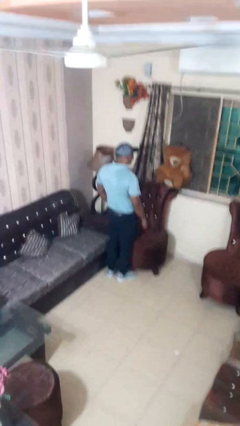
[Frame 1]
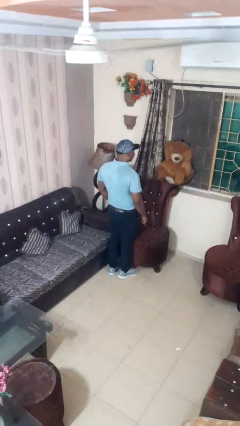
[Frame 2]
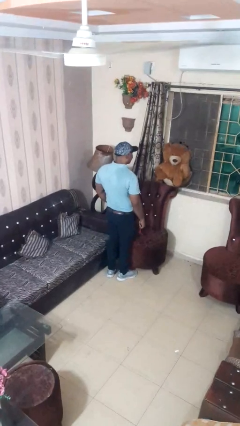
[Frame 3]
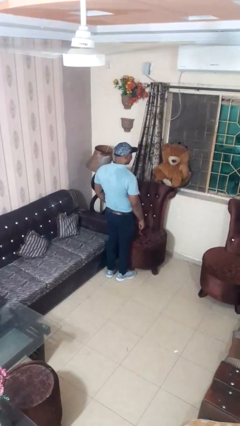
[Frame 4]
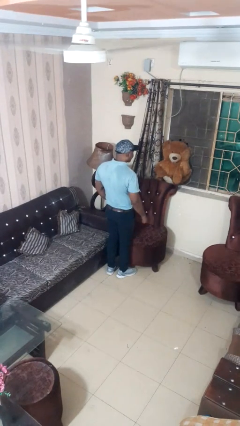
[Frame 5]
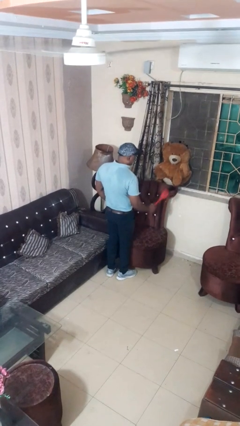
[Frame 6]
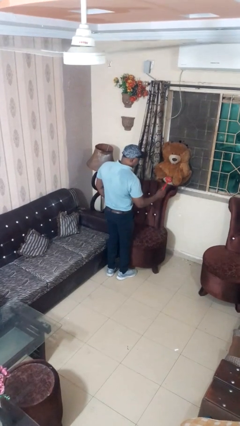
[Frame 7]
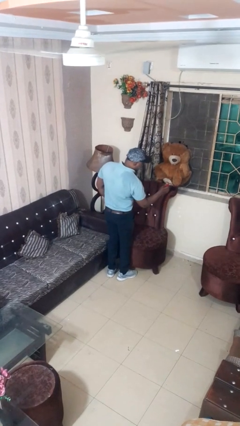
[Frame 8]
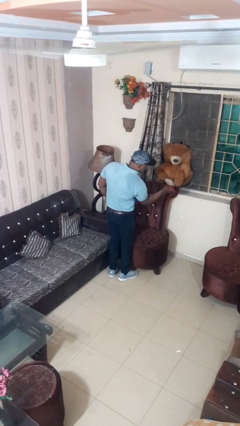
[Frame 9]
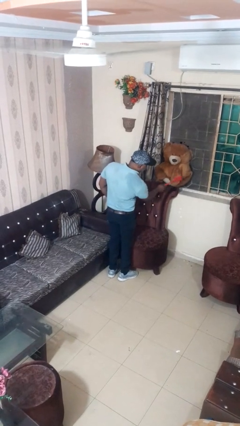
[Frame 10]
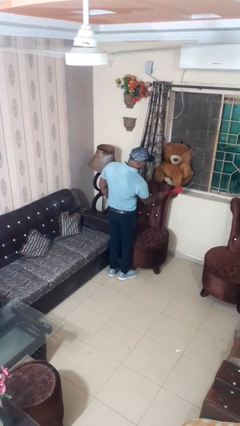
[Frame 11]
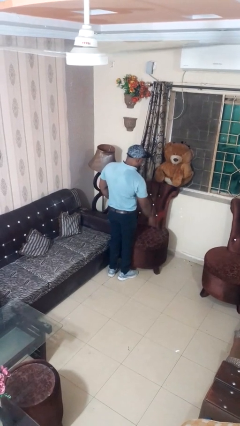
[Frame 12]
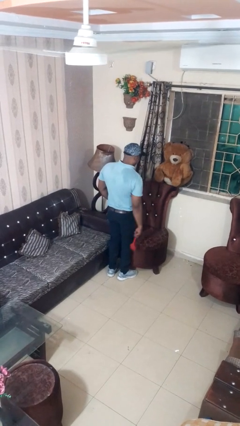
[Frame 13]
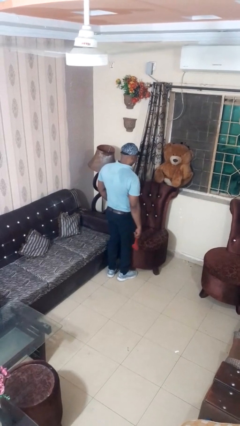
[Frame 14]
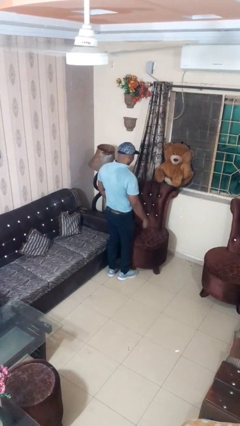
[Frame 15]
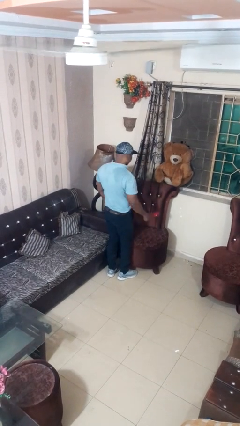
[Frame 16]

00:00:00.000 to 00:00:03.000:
person swats bug

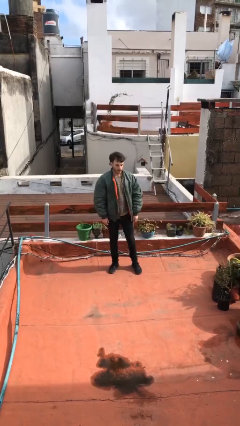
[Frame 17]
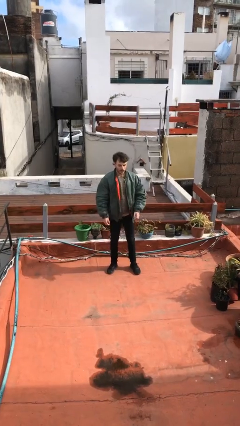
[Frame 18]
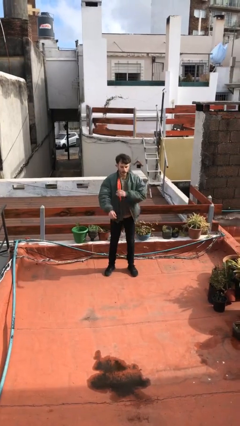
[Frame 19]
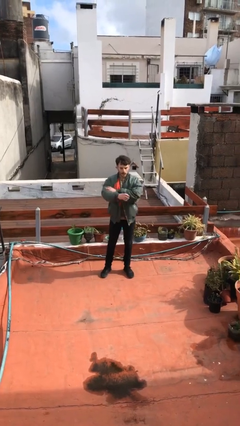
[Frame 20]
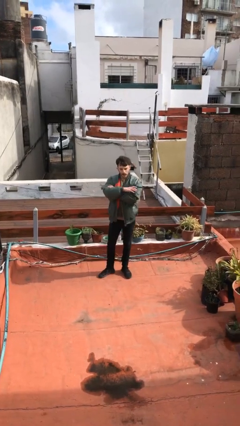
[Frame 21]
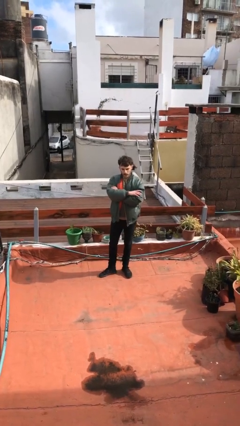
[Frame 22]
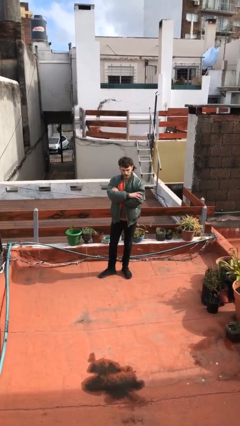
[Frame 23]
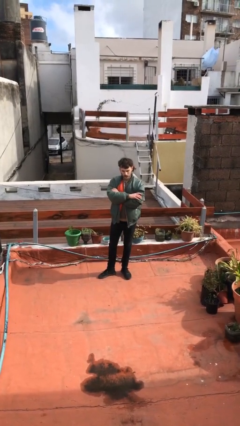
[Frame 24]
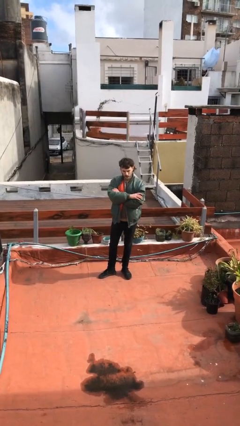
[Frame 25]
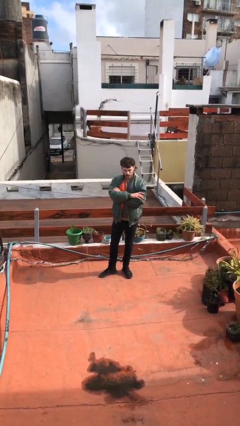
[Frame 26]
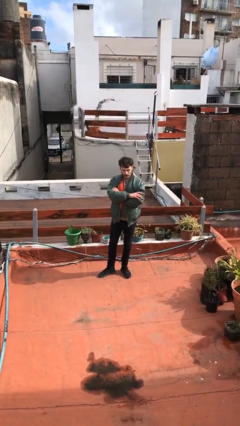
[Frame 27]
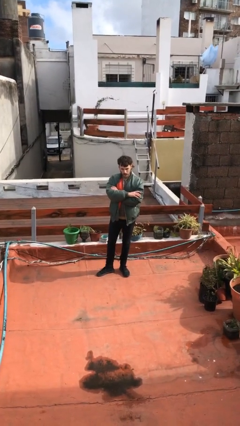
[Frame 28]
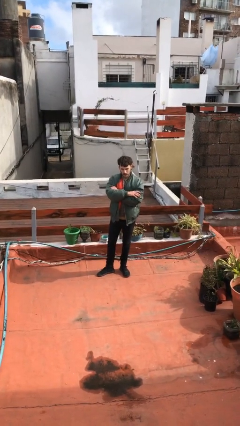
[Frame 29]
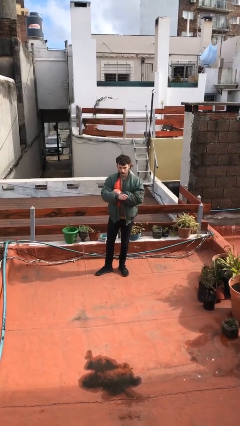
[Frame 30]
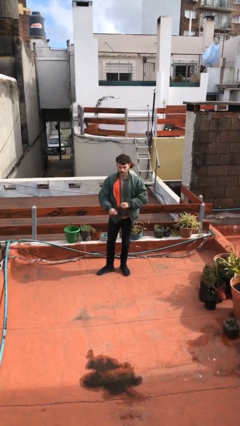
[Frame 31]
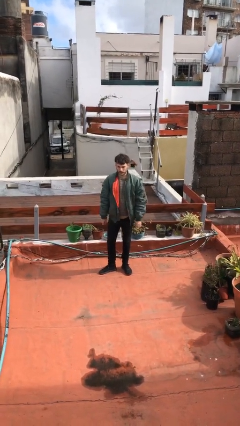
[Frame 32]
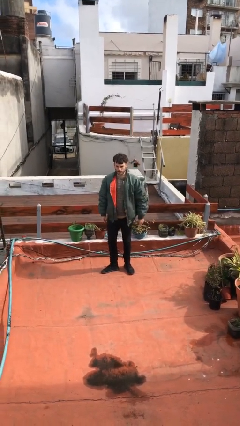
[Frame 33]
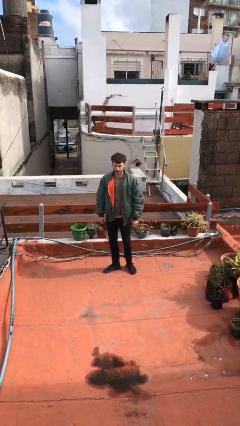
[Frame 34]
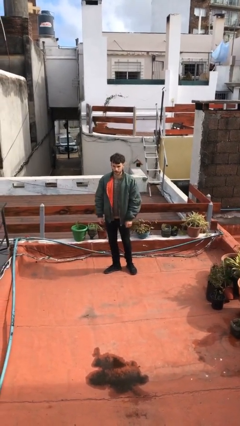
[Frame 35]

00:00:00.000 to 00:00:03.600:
person crosses arms

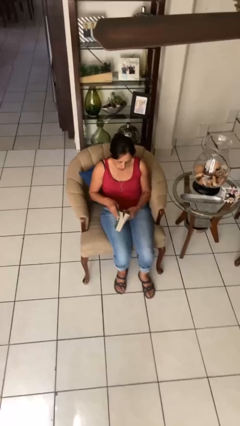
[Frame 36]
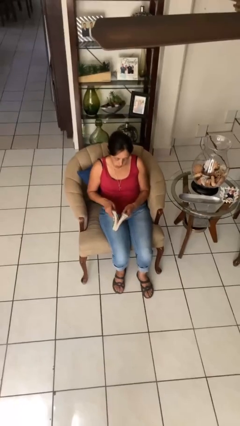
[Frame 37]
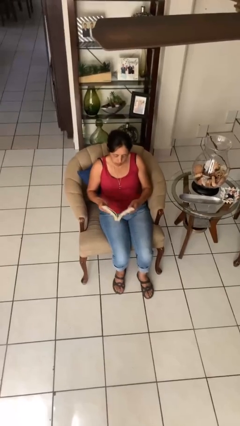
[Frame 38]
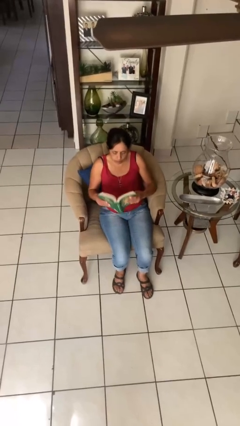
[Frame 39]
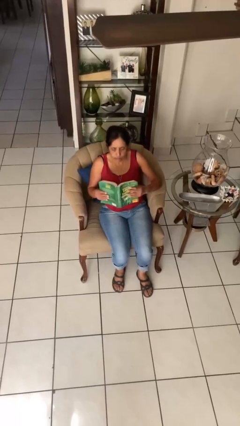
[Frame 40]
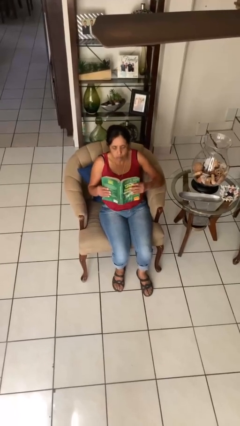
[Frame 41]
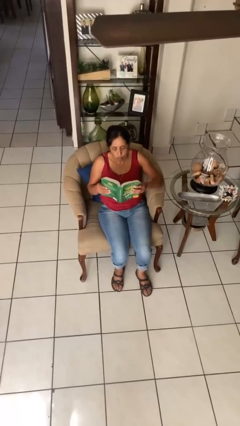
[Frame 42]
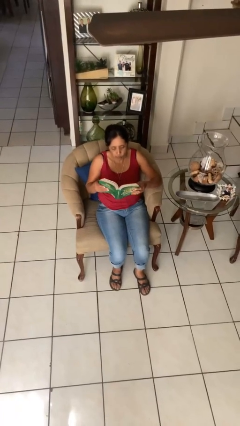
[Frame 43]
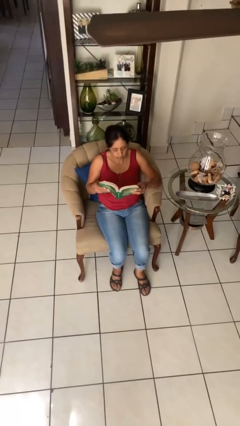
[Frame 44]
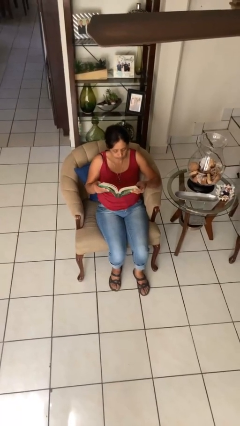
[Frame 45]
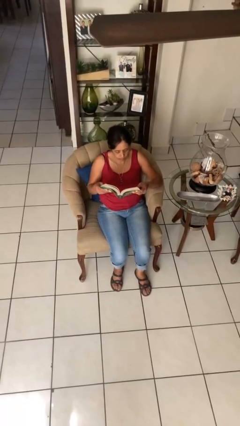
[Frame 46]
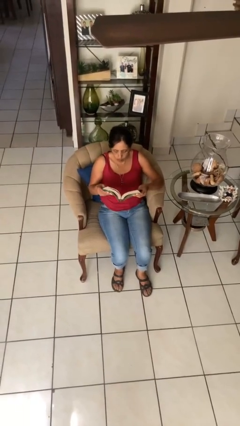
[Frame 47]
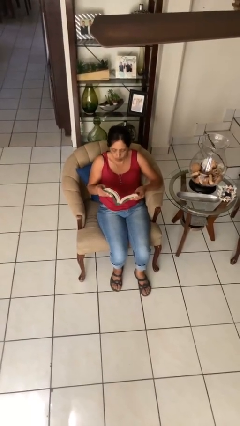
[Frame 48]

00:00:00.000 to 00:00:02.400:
person reads book

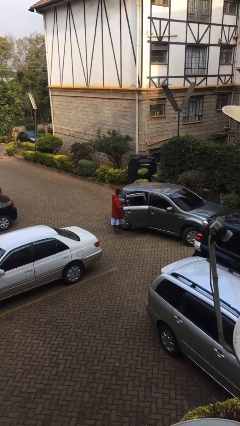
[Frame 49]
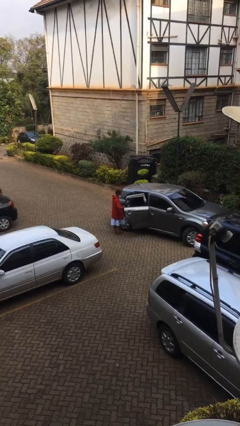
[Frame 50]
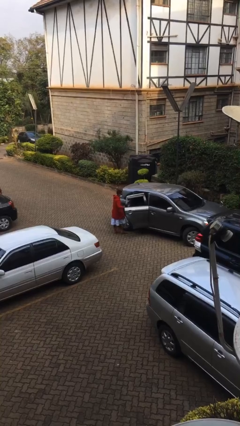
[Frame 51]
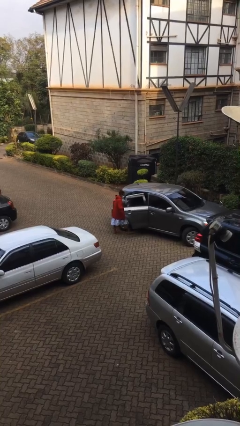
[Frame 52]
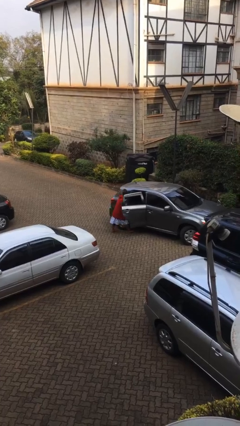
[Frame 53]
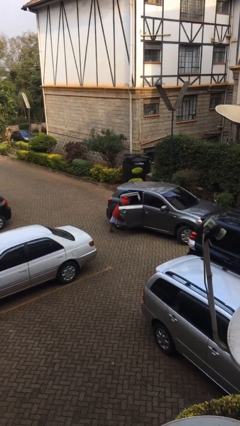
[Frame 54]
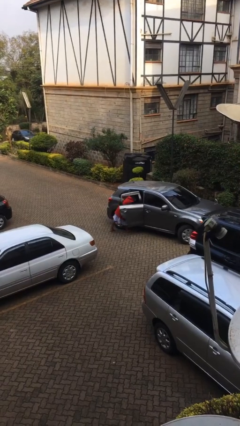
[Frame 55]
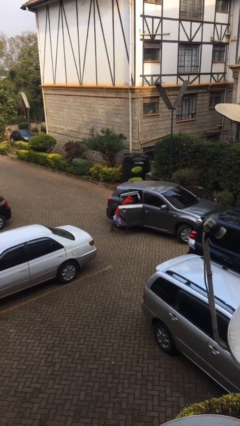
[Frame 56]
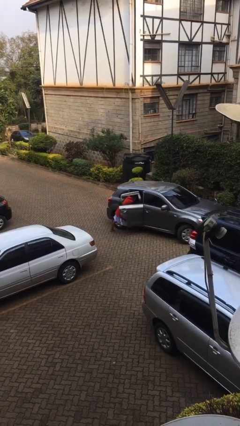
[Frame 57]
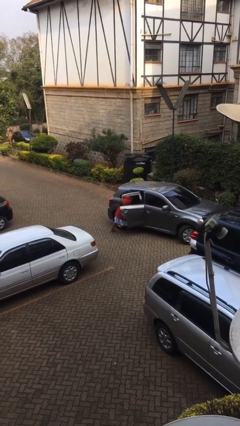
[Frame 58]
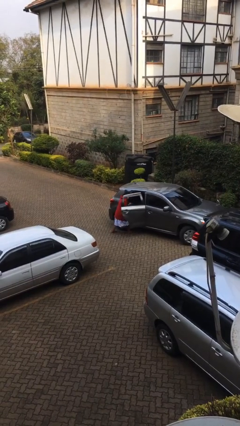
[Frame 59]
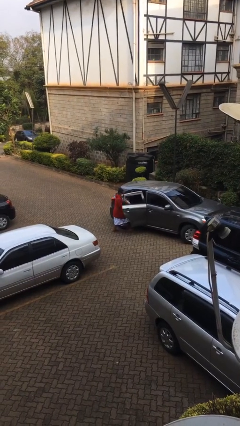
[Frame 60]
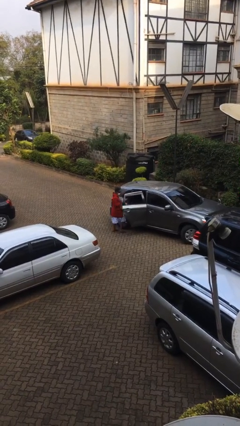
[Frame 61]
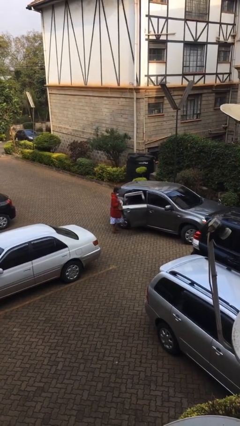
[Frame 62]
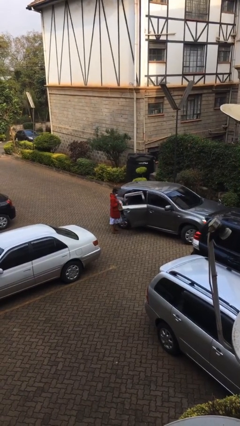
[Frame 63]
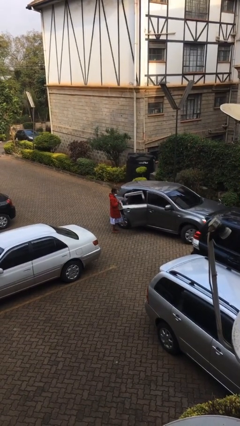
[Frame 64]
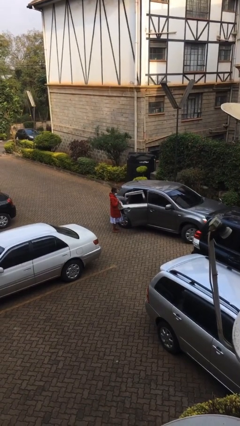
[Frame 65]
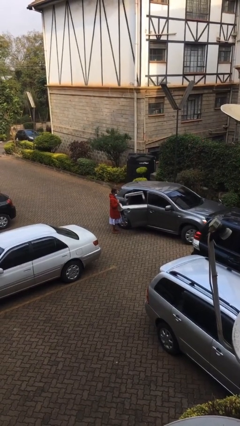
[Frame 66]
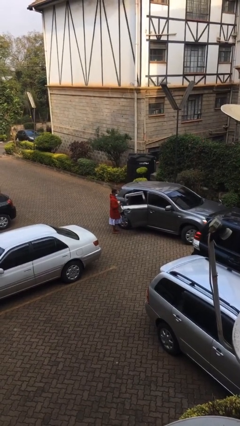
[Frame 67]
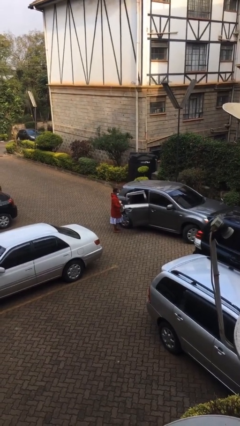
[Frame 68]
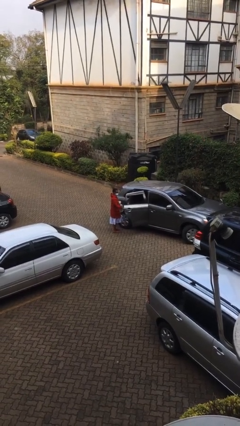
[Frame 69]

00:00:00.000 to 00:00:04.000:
person unloads car

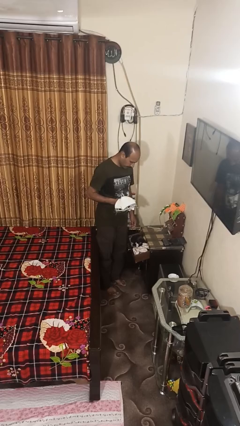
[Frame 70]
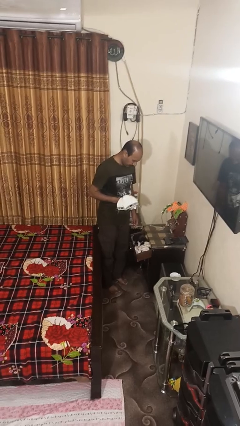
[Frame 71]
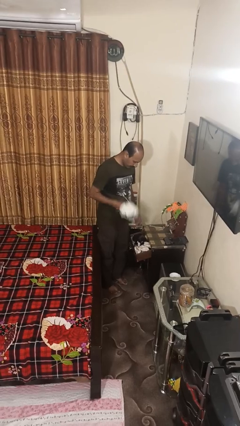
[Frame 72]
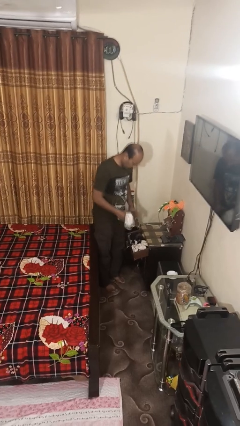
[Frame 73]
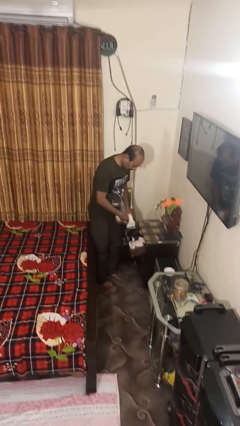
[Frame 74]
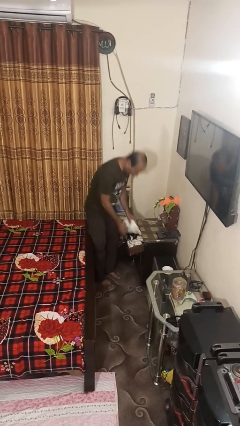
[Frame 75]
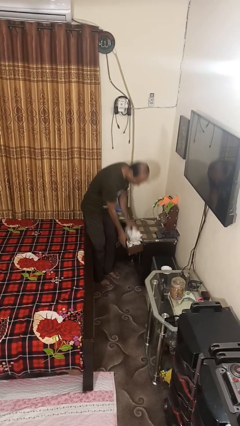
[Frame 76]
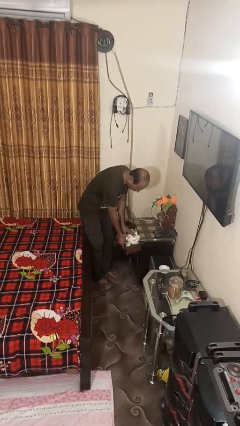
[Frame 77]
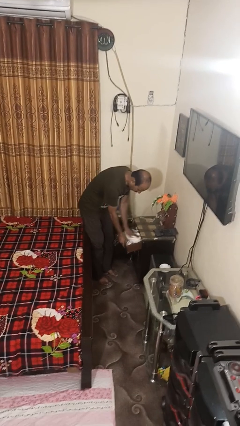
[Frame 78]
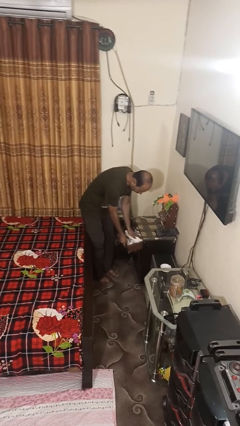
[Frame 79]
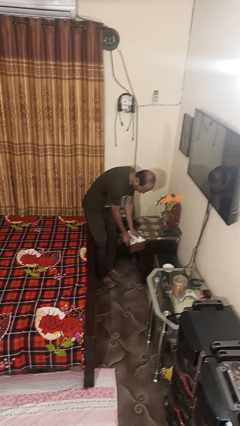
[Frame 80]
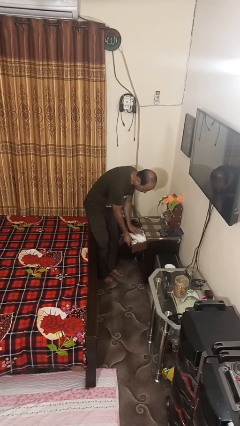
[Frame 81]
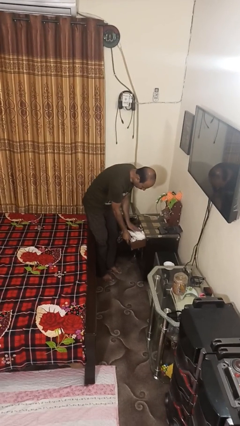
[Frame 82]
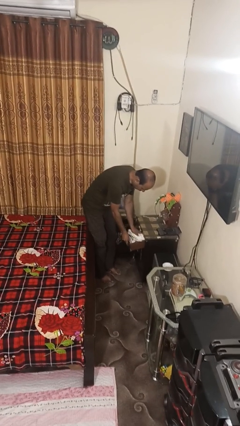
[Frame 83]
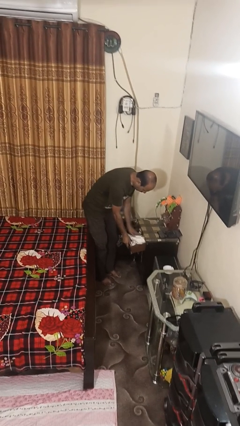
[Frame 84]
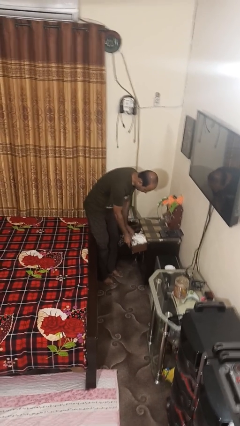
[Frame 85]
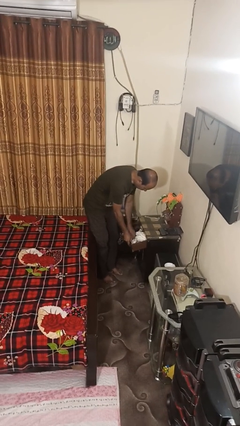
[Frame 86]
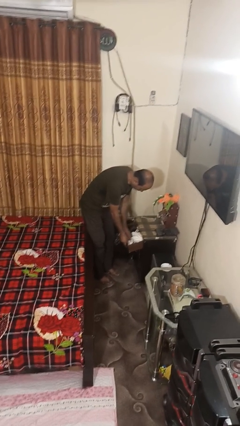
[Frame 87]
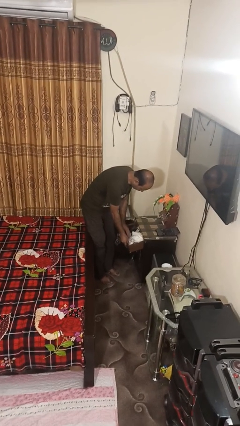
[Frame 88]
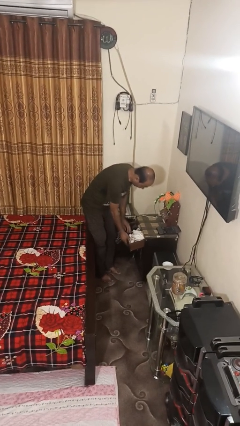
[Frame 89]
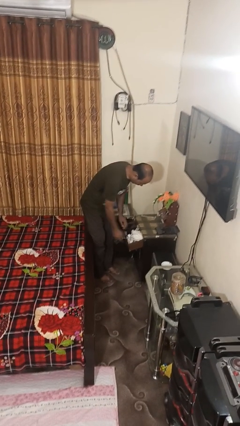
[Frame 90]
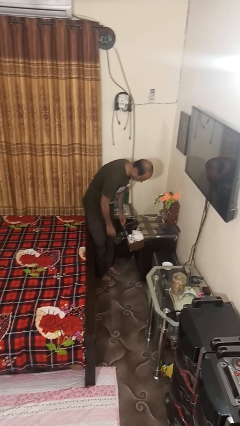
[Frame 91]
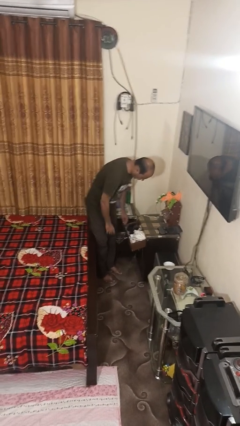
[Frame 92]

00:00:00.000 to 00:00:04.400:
person puts clothes into dresser

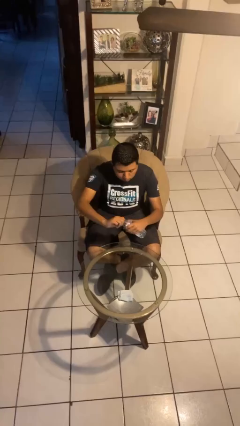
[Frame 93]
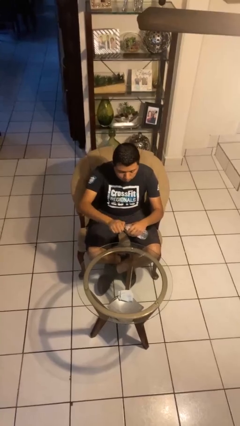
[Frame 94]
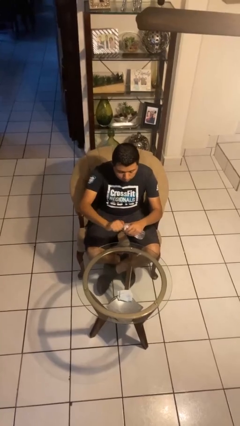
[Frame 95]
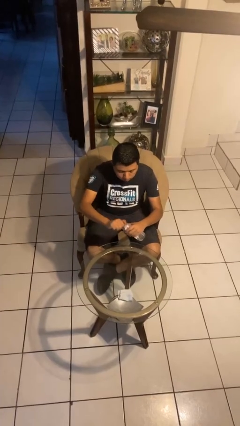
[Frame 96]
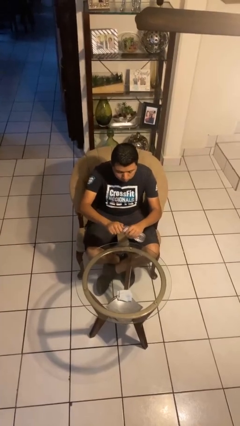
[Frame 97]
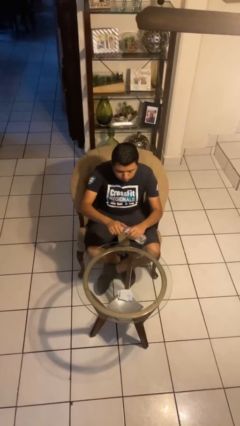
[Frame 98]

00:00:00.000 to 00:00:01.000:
person screws lid to bottle
